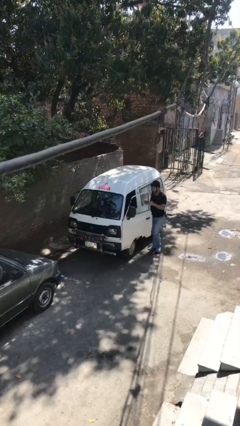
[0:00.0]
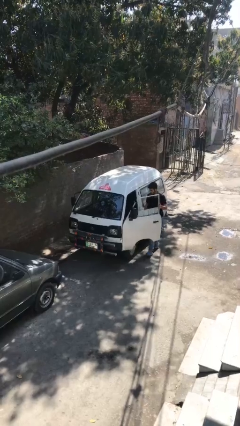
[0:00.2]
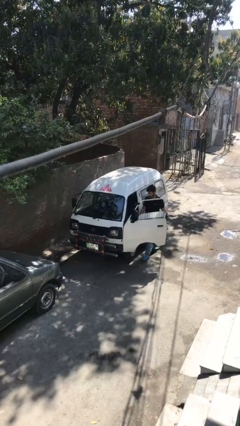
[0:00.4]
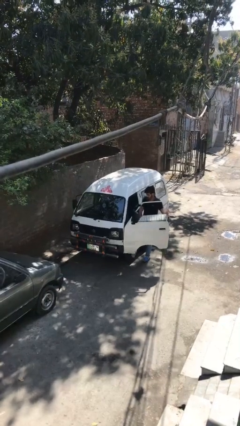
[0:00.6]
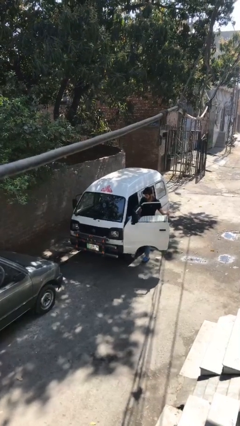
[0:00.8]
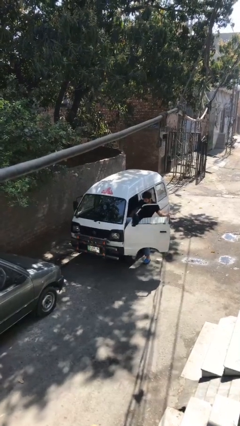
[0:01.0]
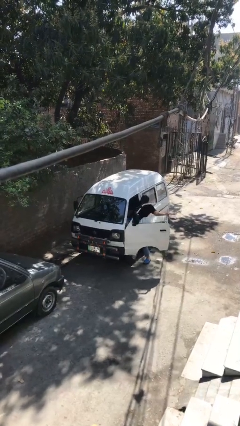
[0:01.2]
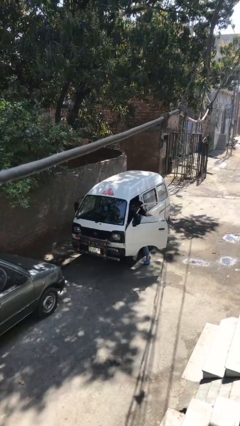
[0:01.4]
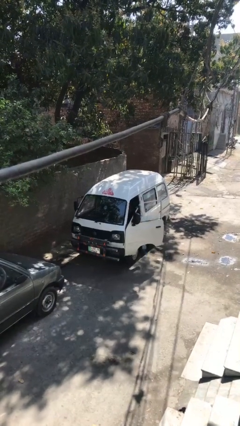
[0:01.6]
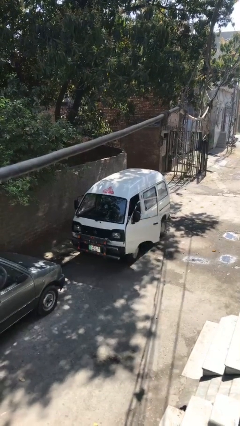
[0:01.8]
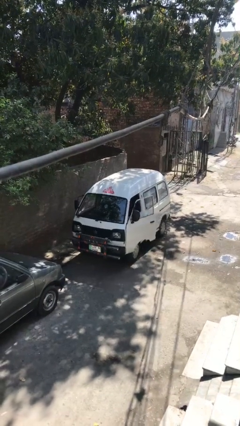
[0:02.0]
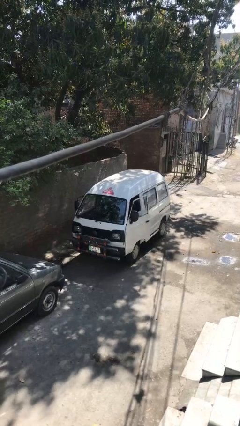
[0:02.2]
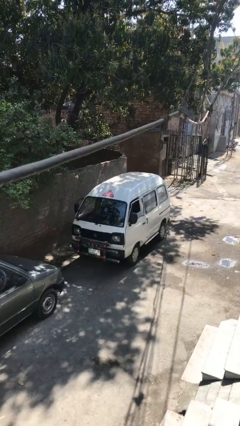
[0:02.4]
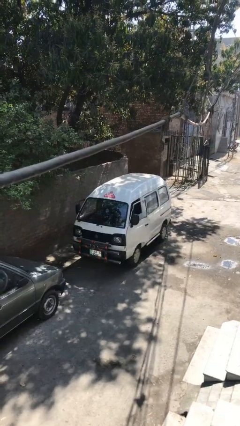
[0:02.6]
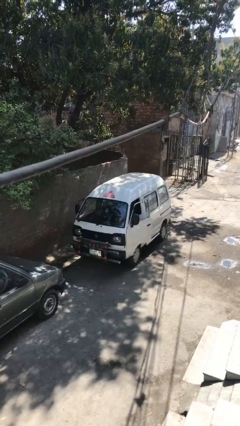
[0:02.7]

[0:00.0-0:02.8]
car picks up person

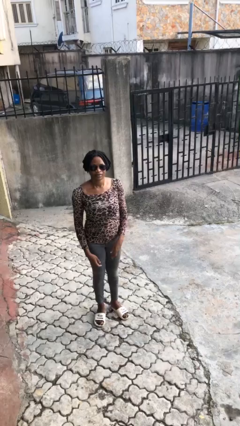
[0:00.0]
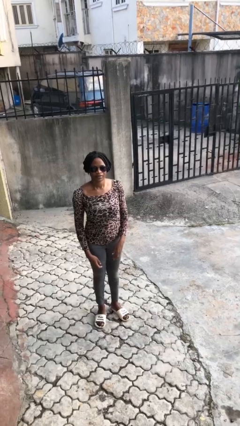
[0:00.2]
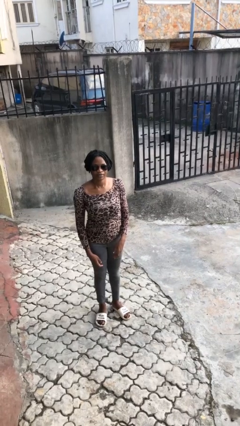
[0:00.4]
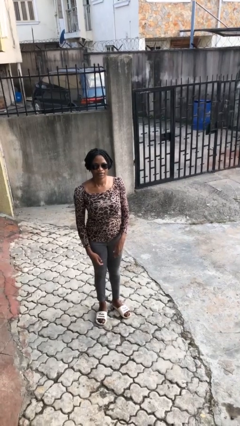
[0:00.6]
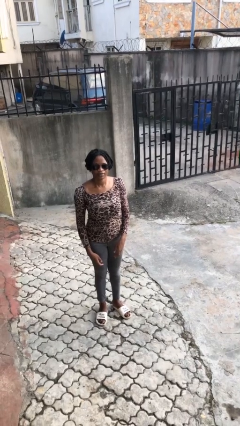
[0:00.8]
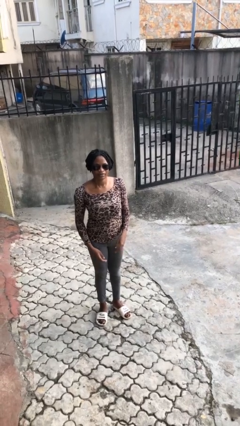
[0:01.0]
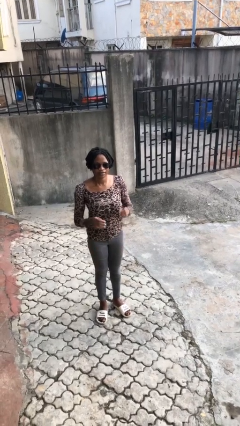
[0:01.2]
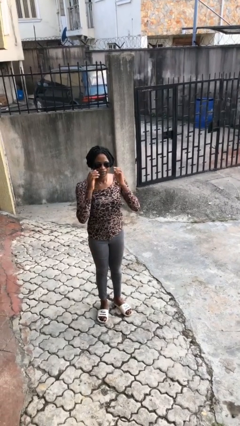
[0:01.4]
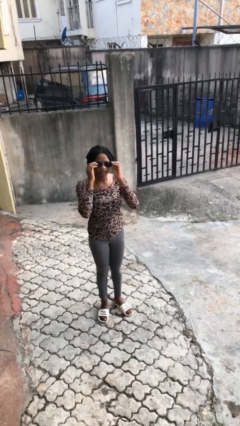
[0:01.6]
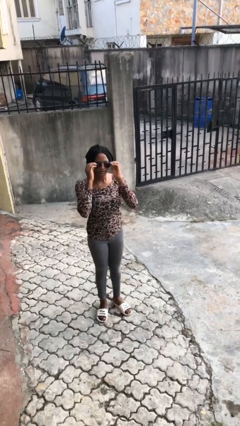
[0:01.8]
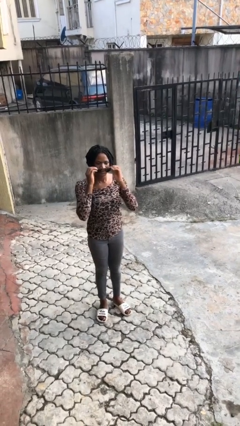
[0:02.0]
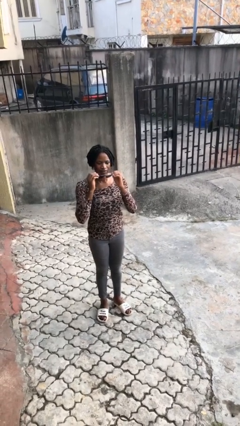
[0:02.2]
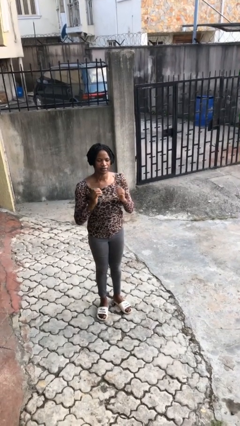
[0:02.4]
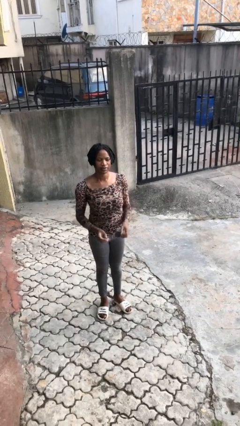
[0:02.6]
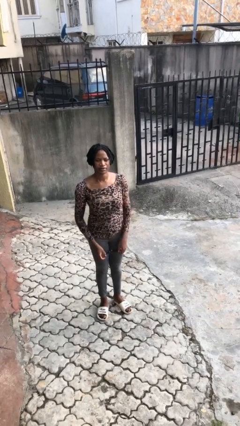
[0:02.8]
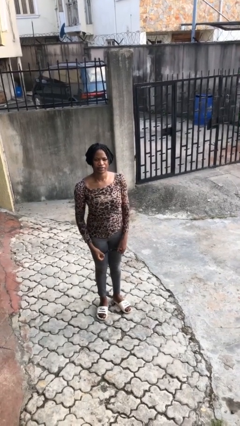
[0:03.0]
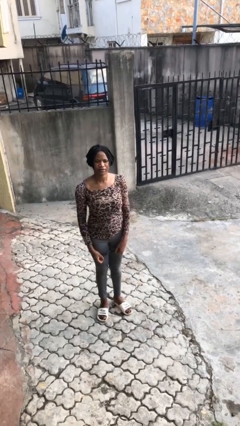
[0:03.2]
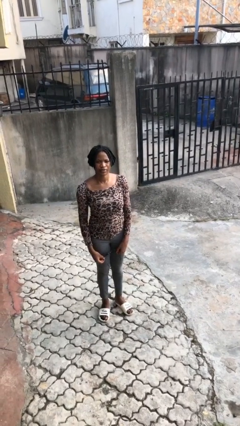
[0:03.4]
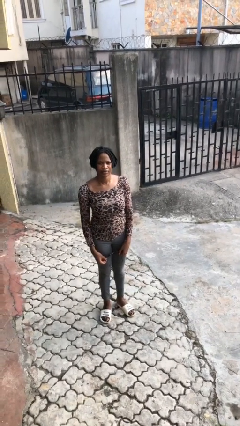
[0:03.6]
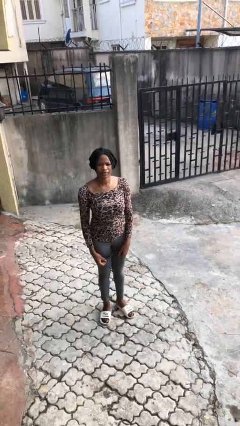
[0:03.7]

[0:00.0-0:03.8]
person takes off sunglasses

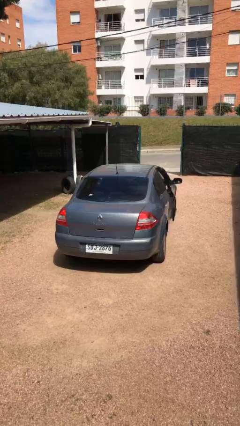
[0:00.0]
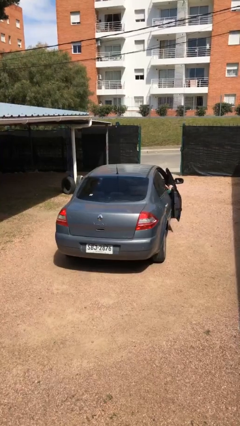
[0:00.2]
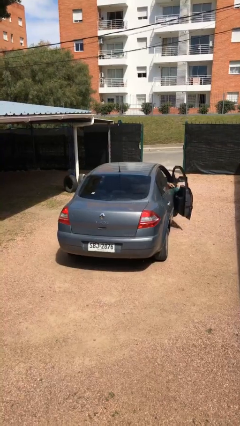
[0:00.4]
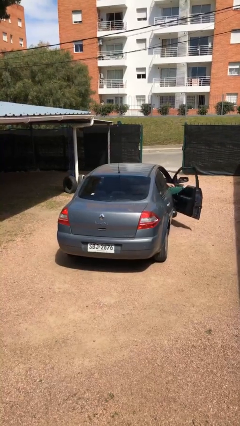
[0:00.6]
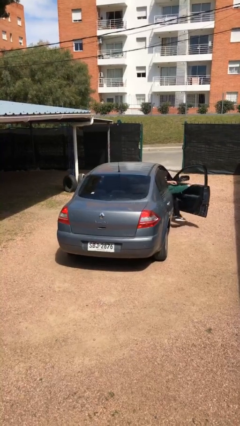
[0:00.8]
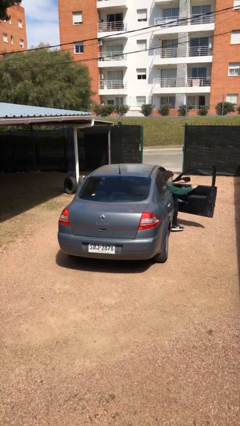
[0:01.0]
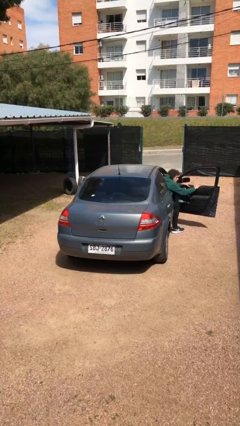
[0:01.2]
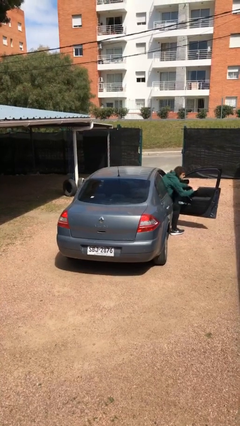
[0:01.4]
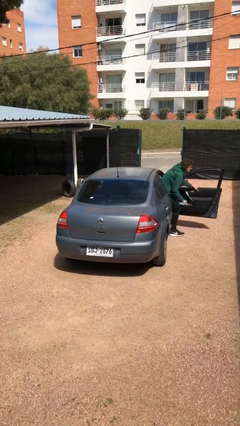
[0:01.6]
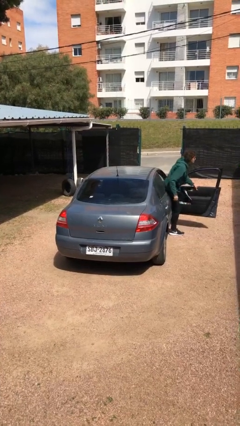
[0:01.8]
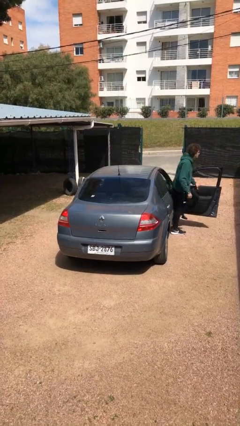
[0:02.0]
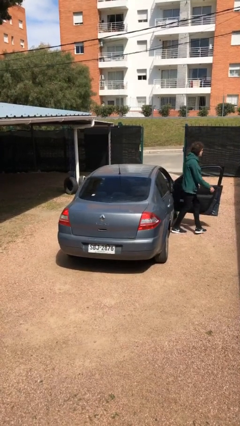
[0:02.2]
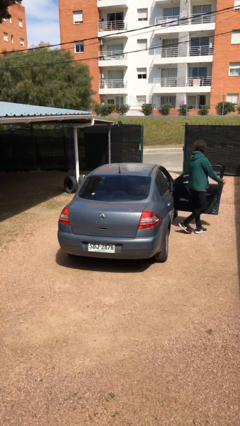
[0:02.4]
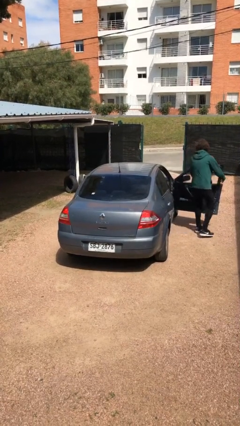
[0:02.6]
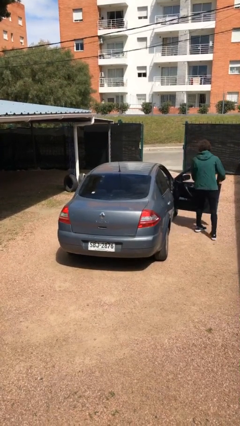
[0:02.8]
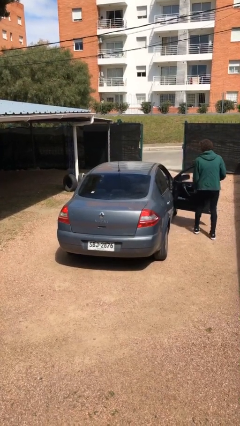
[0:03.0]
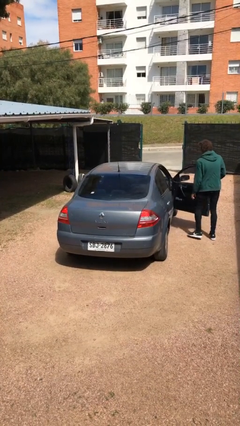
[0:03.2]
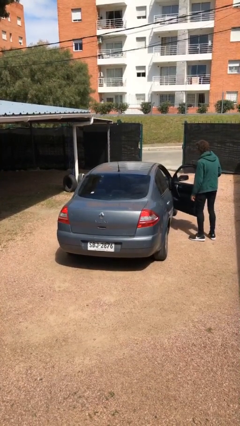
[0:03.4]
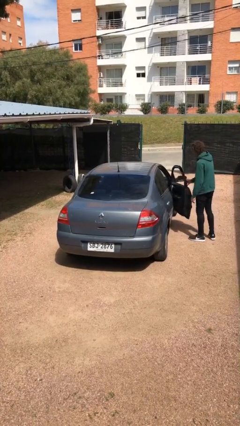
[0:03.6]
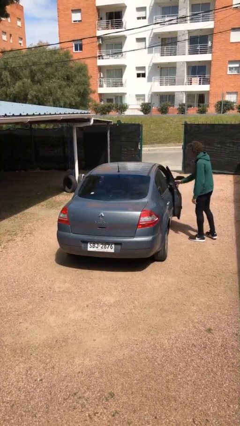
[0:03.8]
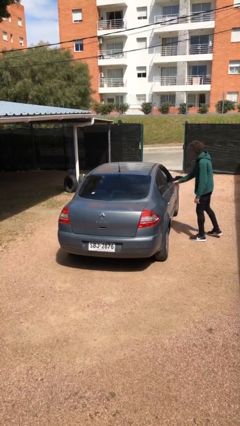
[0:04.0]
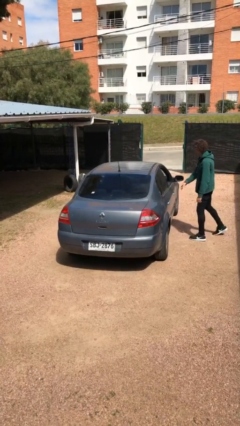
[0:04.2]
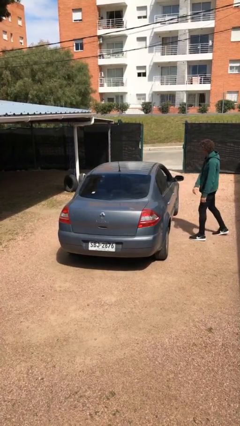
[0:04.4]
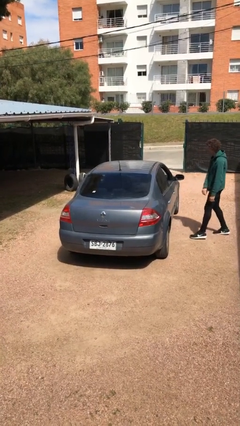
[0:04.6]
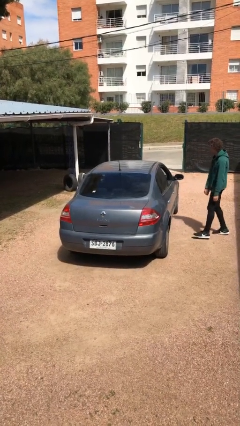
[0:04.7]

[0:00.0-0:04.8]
car drops off person

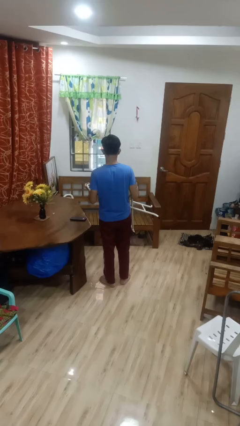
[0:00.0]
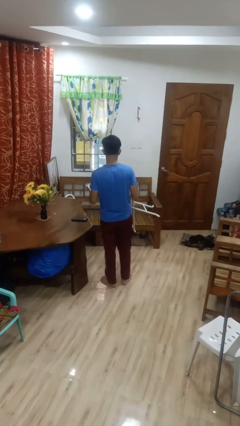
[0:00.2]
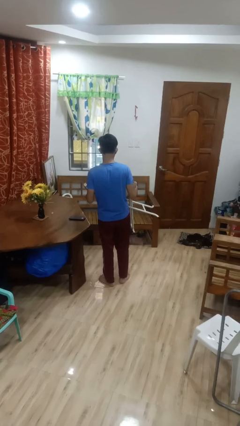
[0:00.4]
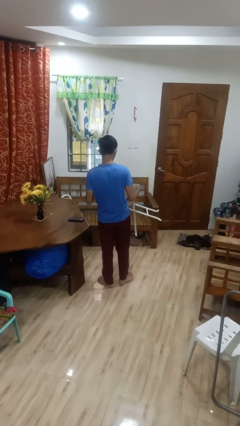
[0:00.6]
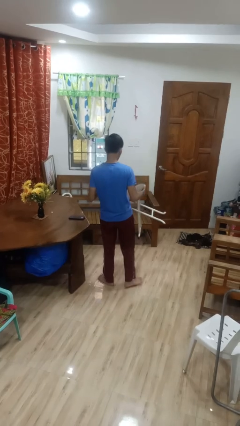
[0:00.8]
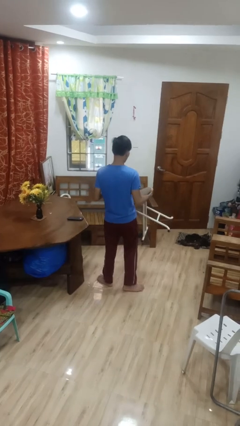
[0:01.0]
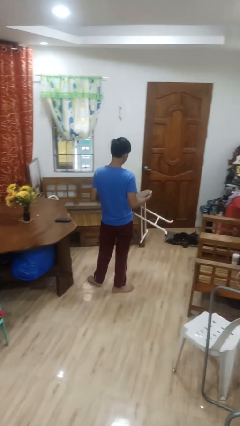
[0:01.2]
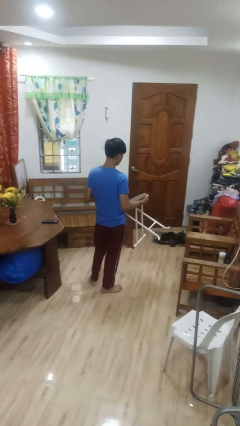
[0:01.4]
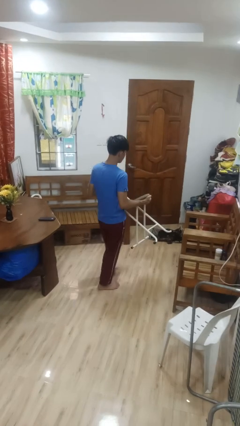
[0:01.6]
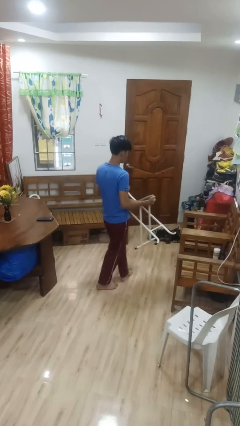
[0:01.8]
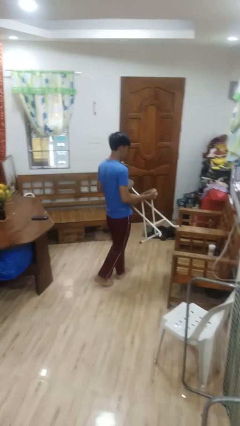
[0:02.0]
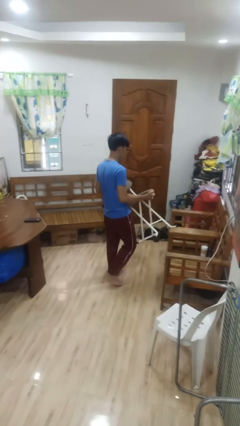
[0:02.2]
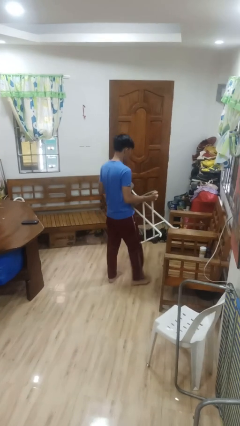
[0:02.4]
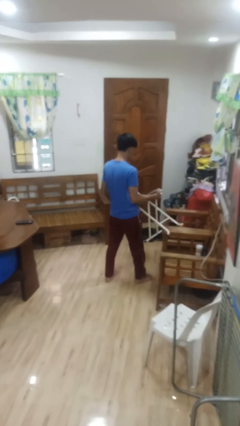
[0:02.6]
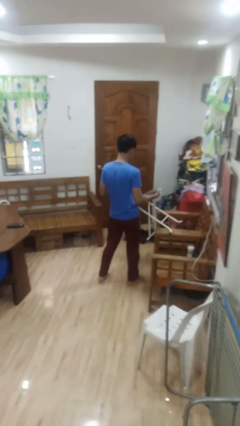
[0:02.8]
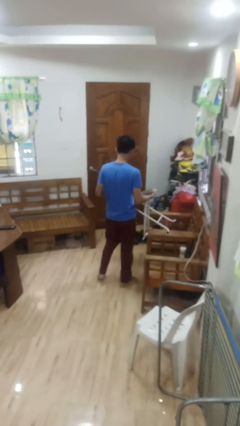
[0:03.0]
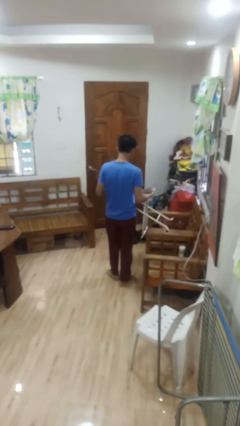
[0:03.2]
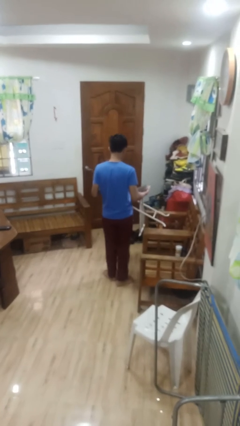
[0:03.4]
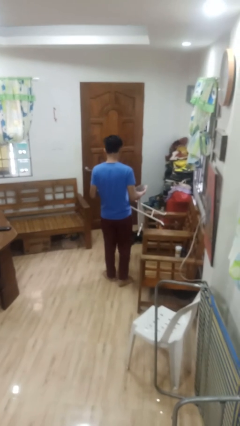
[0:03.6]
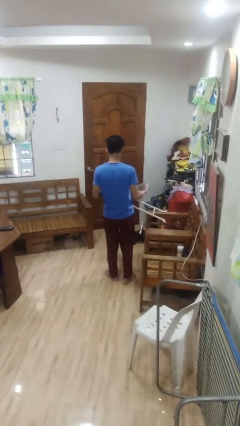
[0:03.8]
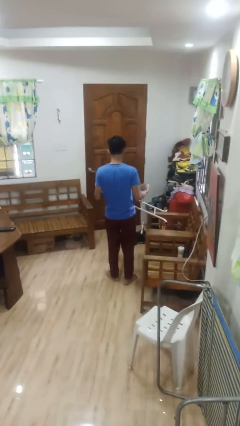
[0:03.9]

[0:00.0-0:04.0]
person carries furniture

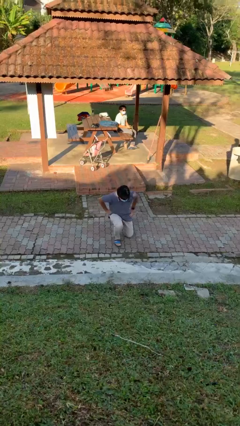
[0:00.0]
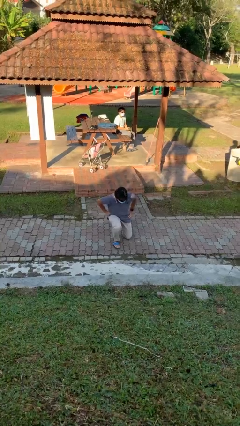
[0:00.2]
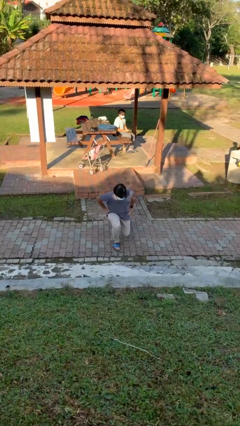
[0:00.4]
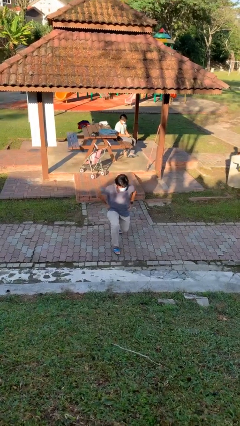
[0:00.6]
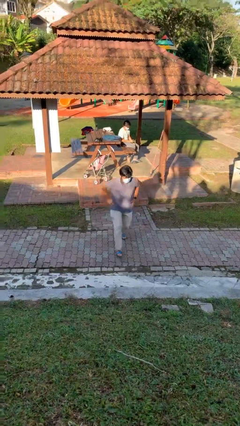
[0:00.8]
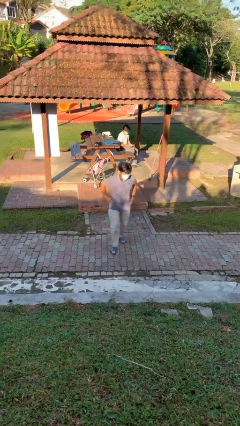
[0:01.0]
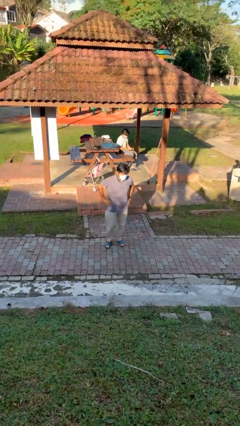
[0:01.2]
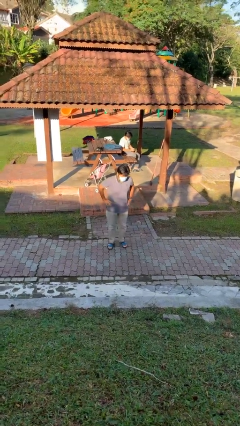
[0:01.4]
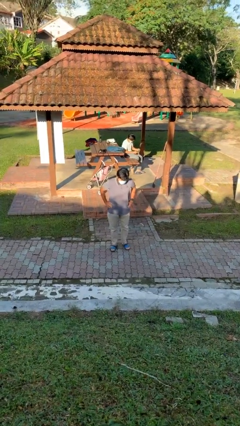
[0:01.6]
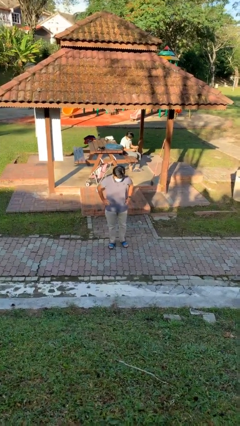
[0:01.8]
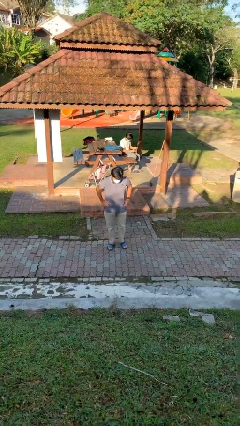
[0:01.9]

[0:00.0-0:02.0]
person stands up from floor

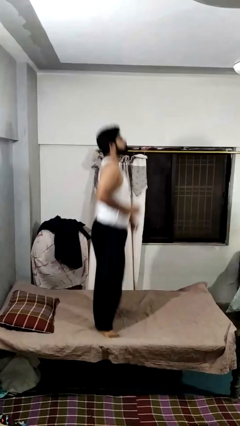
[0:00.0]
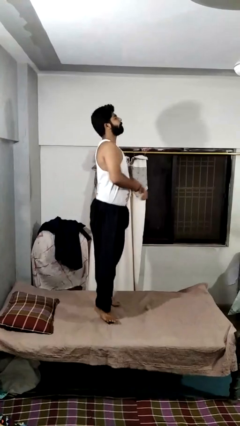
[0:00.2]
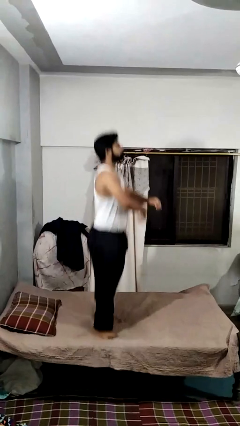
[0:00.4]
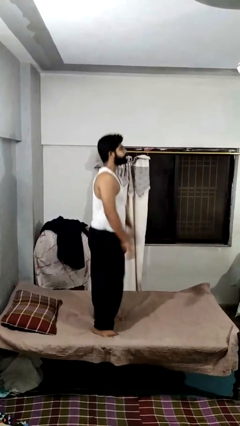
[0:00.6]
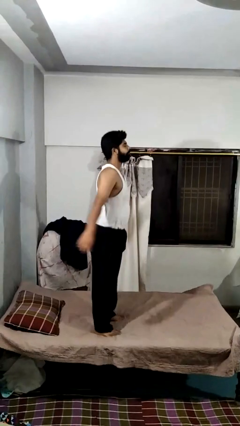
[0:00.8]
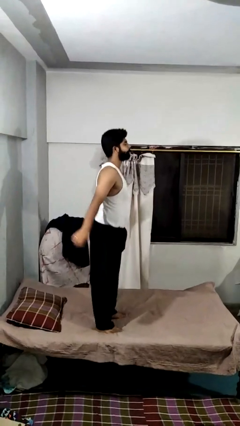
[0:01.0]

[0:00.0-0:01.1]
person jumps on bed
